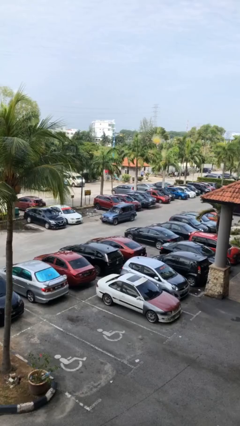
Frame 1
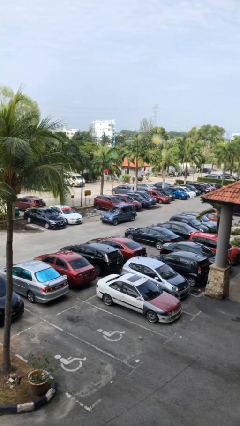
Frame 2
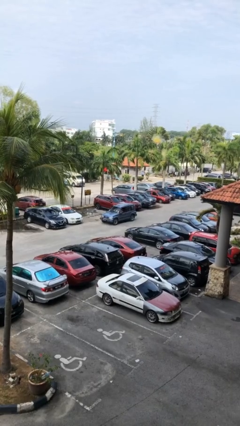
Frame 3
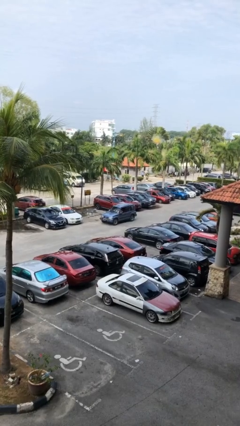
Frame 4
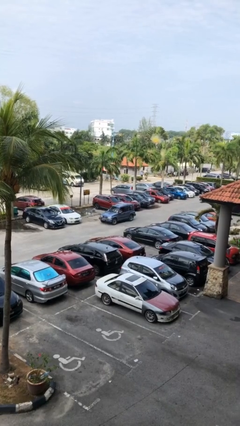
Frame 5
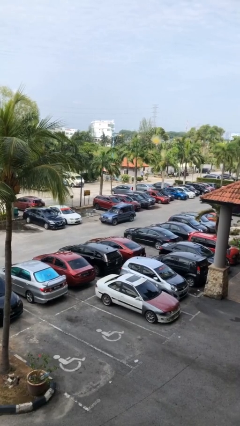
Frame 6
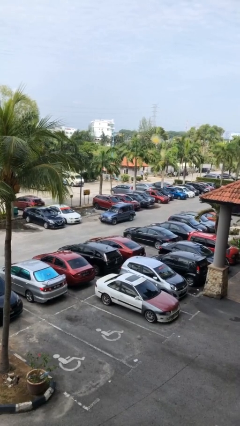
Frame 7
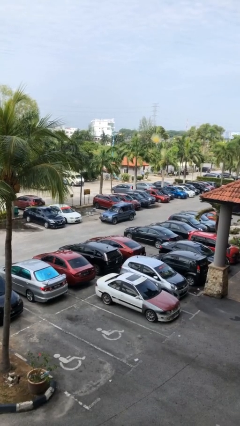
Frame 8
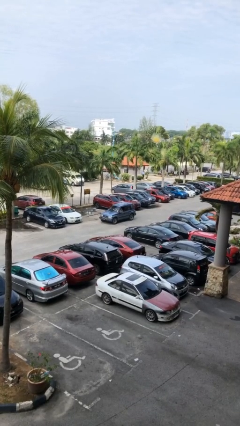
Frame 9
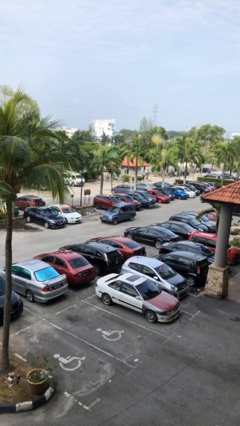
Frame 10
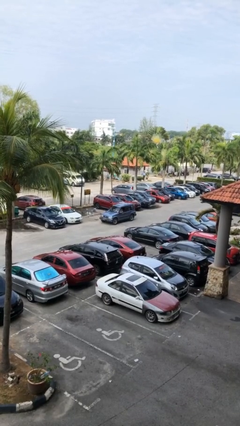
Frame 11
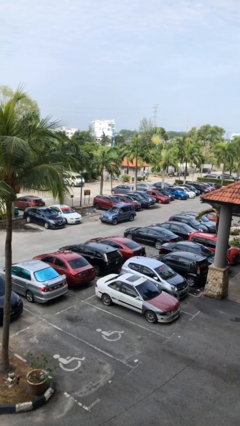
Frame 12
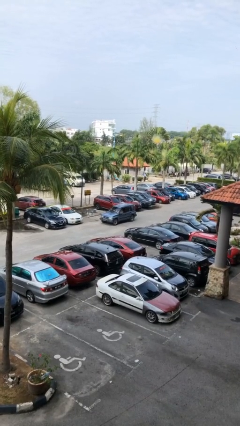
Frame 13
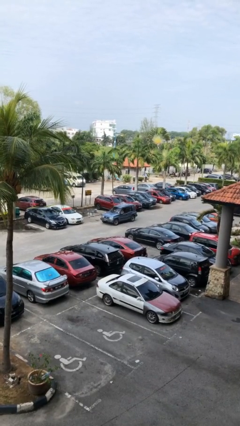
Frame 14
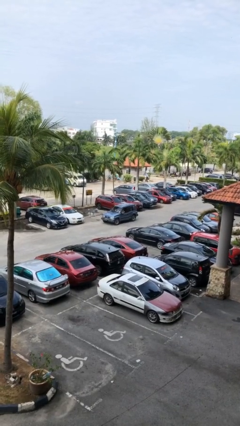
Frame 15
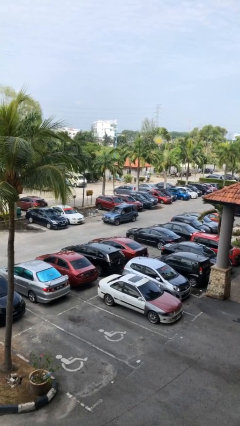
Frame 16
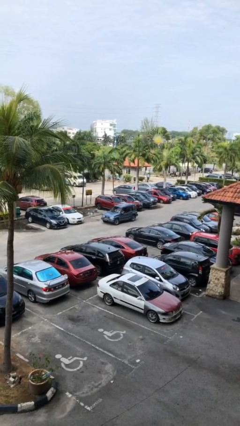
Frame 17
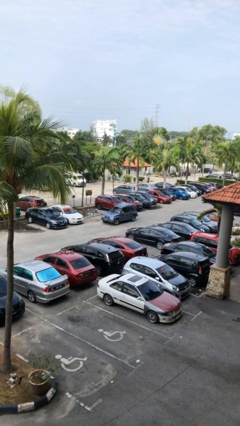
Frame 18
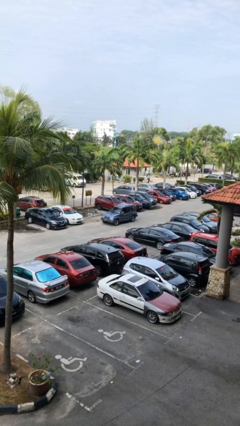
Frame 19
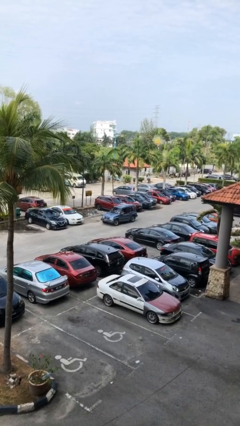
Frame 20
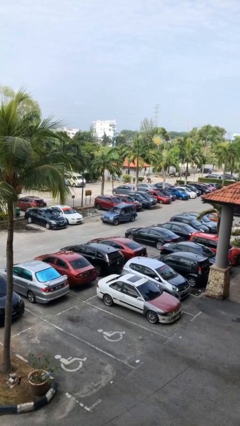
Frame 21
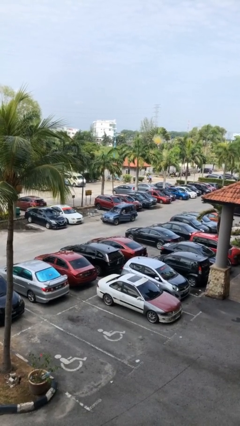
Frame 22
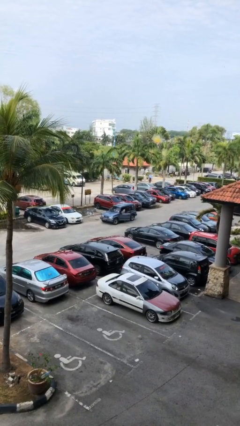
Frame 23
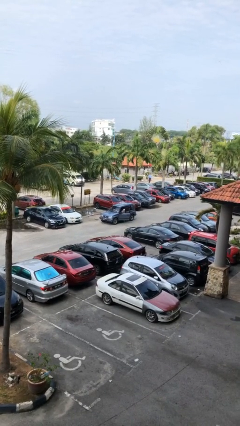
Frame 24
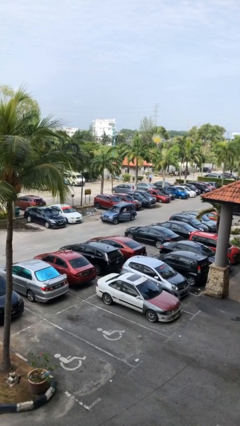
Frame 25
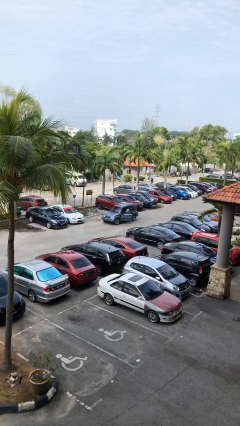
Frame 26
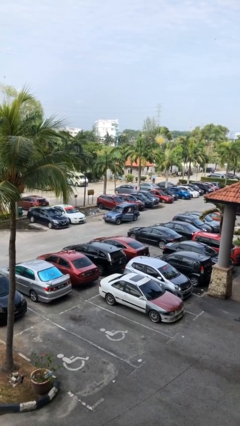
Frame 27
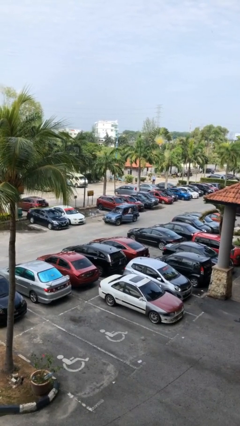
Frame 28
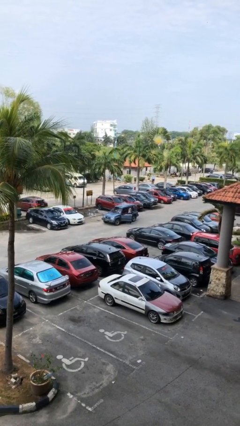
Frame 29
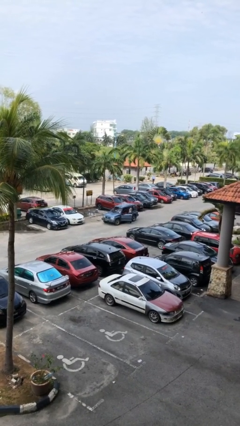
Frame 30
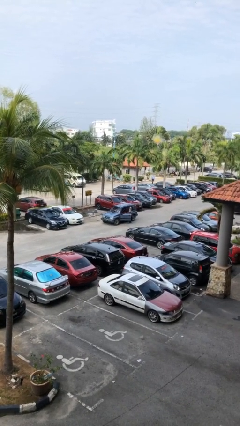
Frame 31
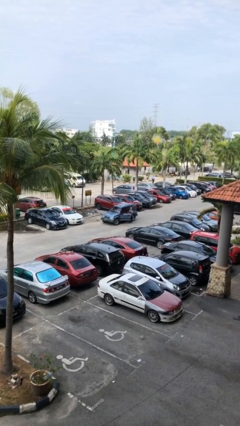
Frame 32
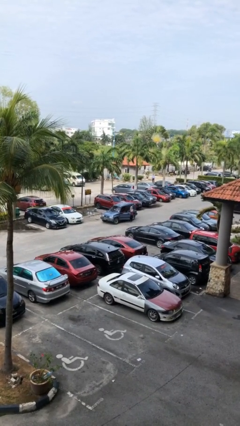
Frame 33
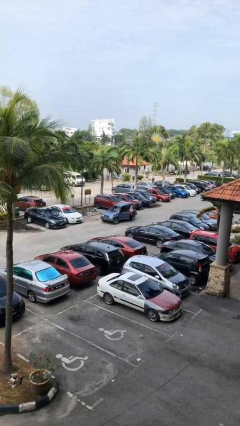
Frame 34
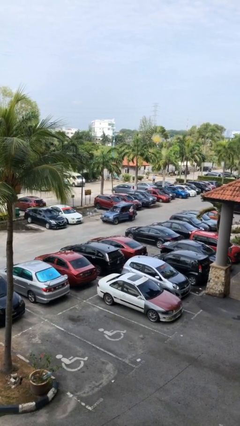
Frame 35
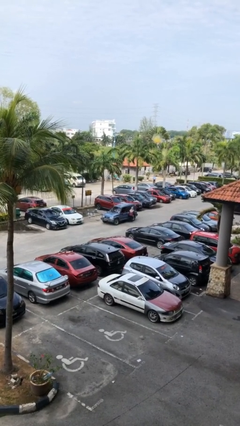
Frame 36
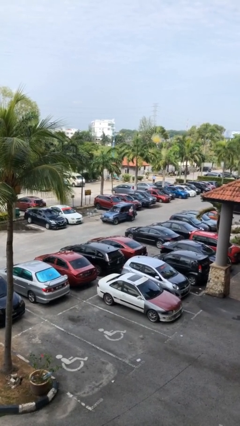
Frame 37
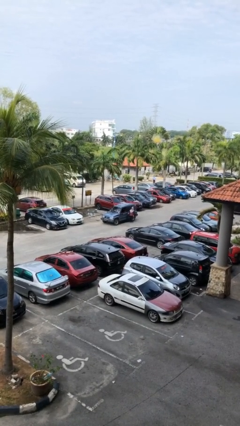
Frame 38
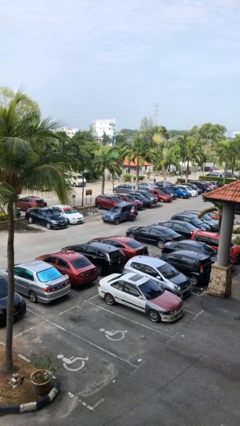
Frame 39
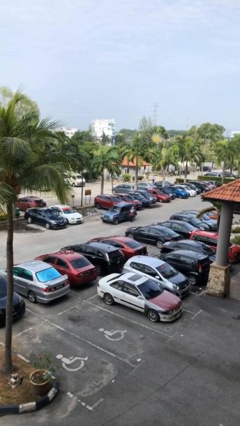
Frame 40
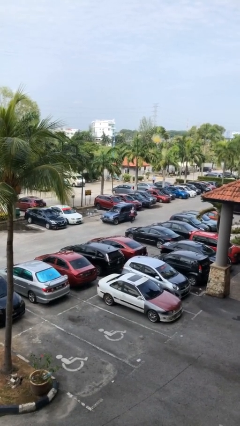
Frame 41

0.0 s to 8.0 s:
car drops off person

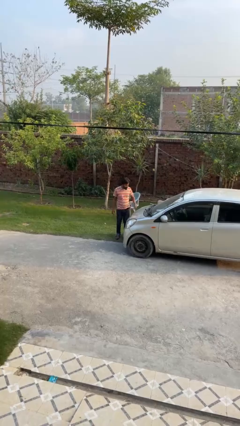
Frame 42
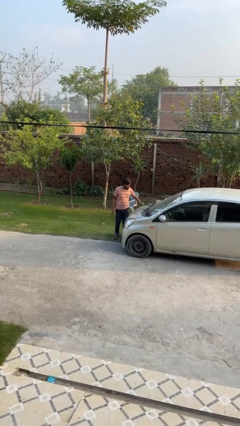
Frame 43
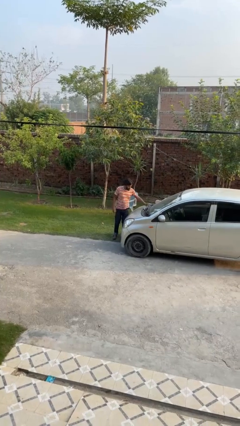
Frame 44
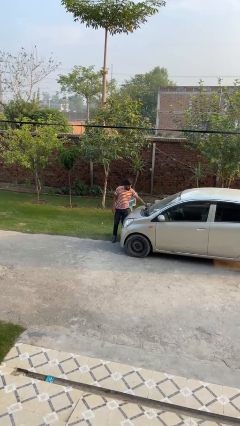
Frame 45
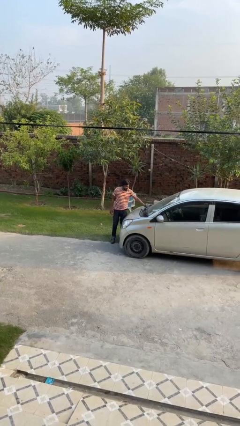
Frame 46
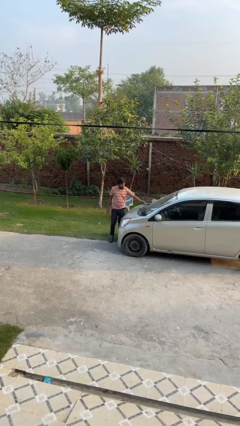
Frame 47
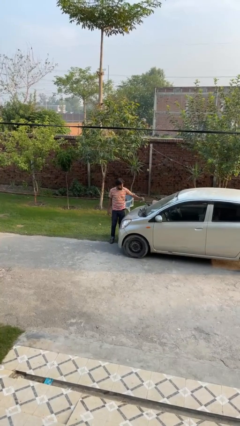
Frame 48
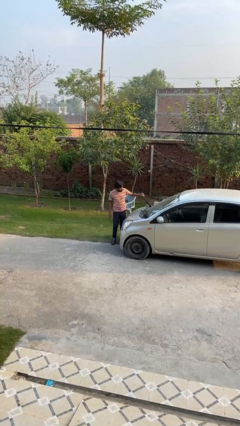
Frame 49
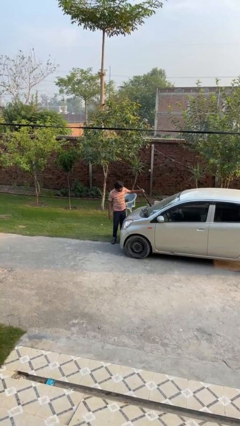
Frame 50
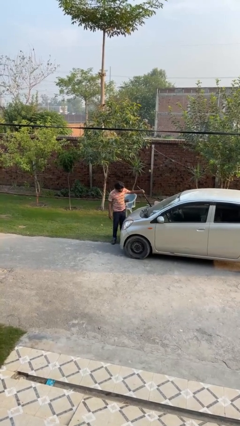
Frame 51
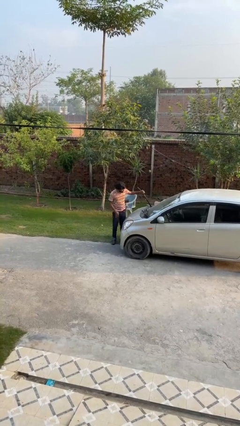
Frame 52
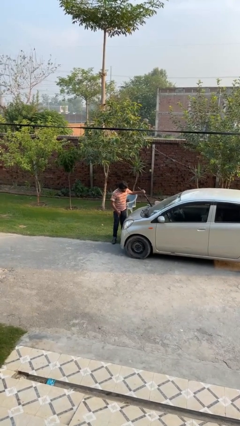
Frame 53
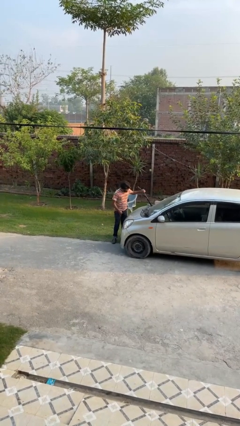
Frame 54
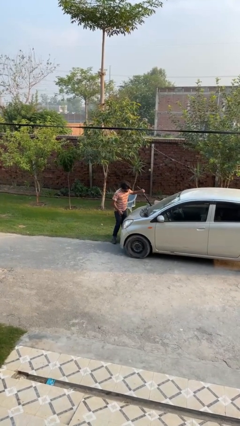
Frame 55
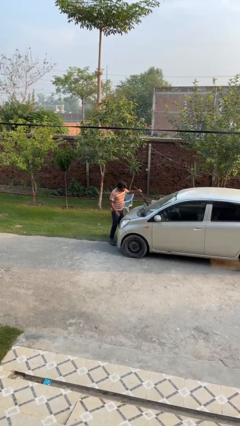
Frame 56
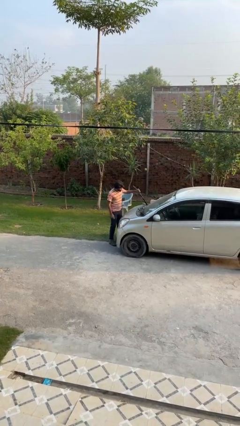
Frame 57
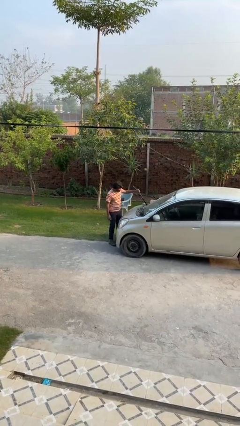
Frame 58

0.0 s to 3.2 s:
person flips up car wipers

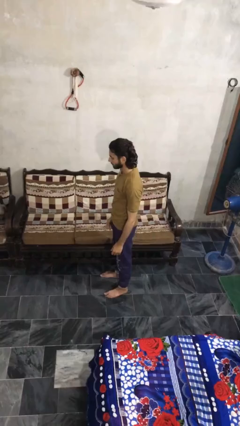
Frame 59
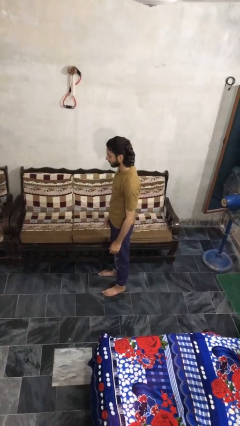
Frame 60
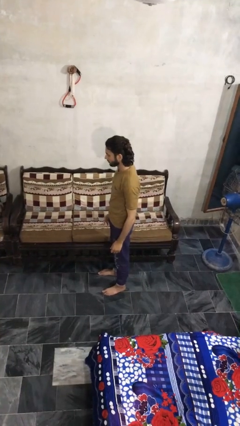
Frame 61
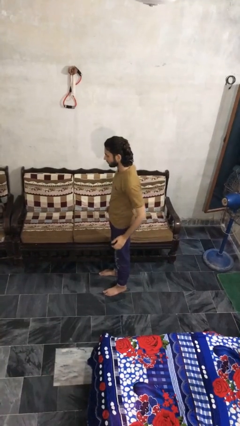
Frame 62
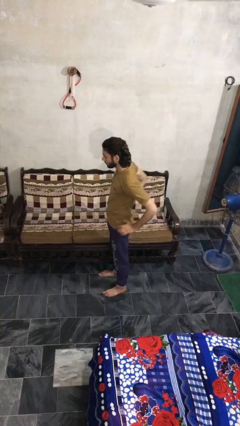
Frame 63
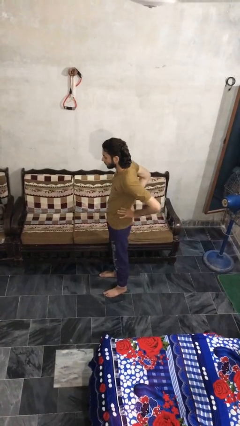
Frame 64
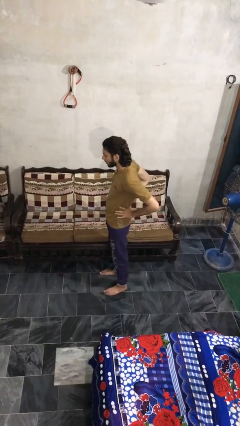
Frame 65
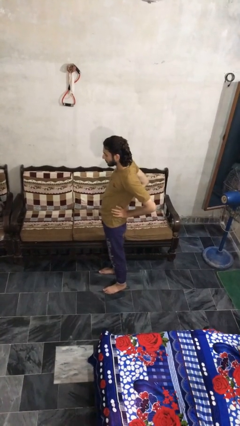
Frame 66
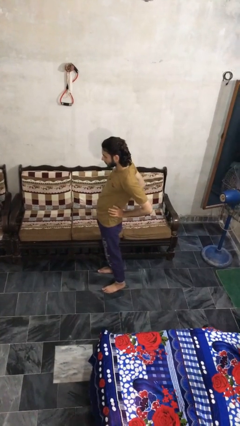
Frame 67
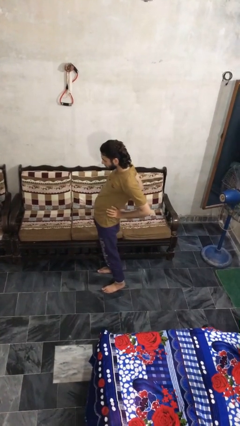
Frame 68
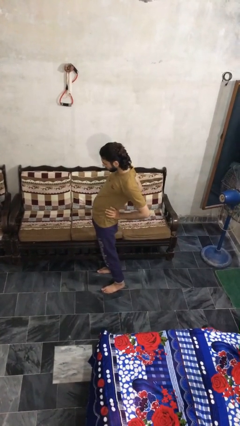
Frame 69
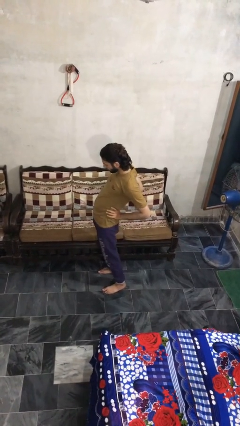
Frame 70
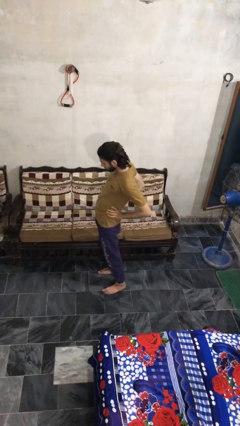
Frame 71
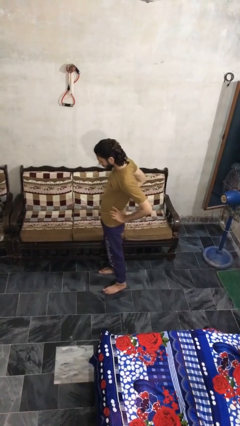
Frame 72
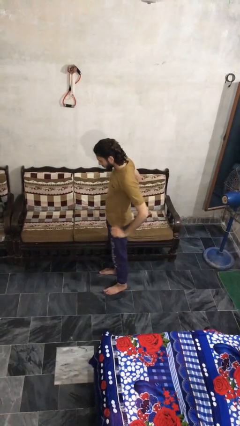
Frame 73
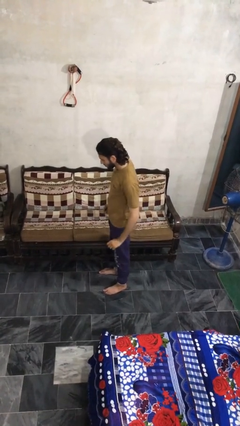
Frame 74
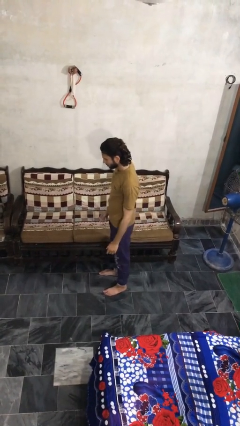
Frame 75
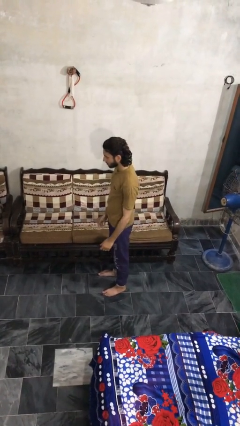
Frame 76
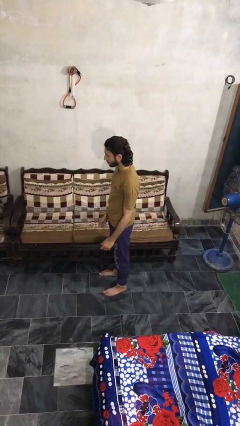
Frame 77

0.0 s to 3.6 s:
person stretches back

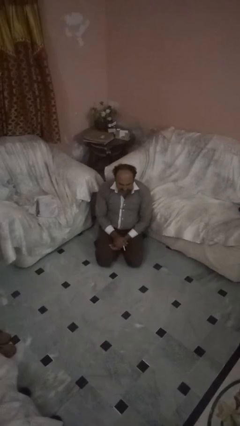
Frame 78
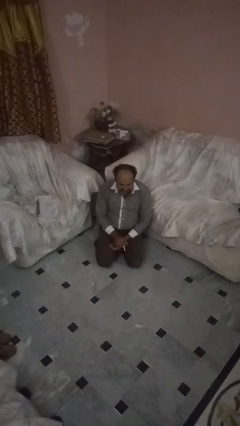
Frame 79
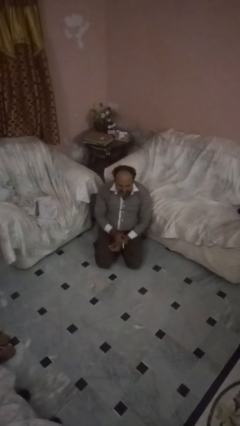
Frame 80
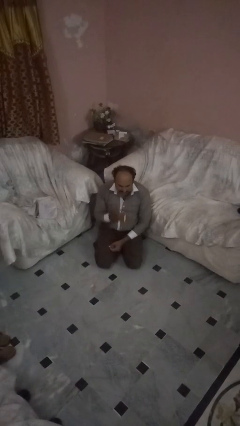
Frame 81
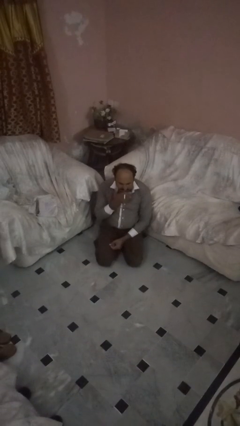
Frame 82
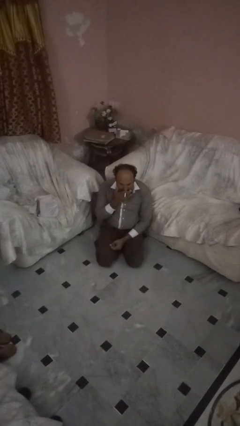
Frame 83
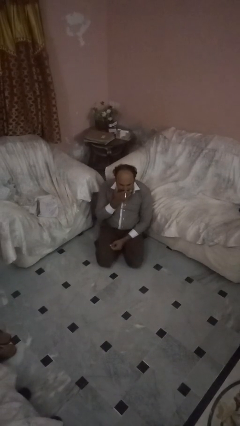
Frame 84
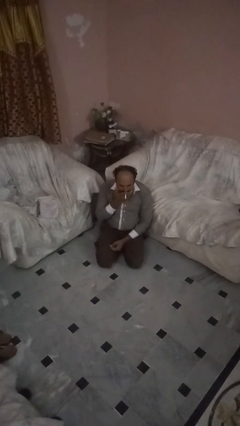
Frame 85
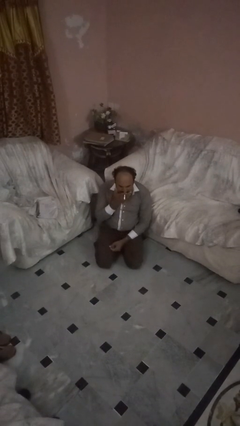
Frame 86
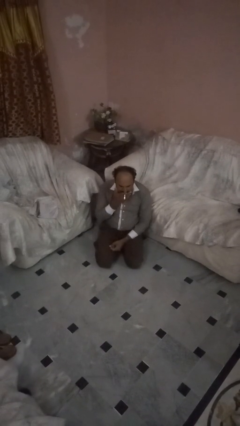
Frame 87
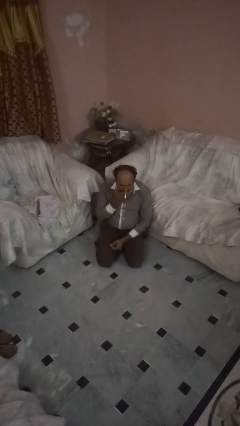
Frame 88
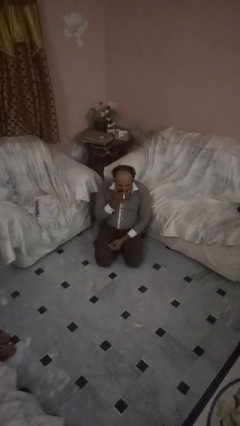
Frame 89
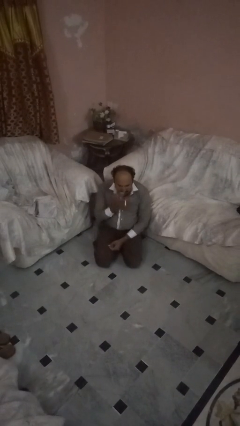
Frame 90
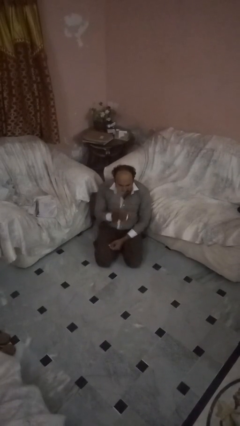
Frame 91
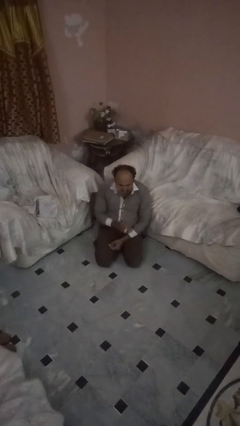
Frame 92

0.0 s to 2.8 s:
person vapes

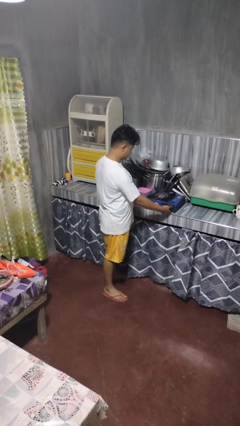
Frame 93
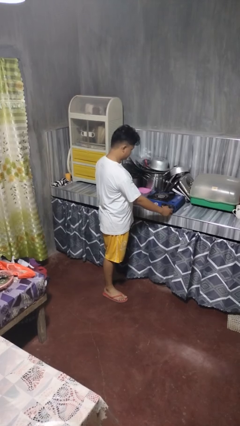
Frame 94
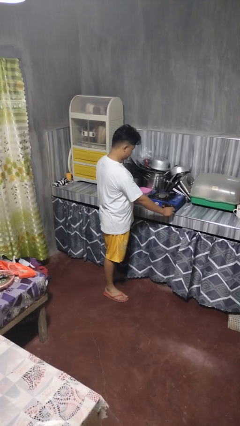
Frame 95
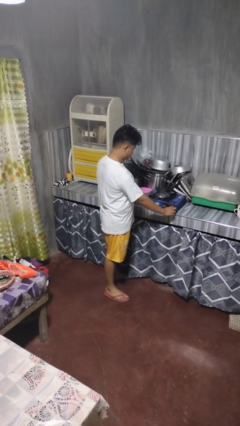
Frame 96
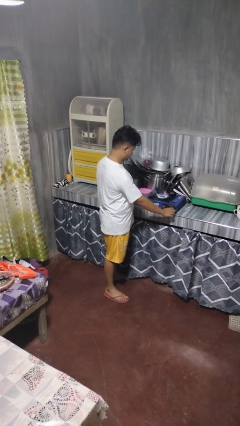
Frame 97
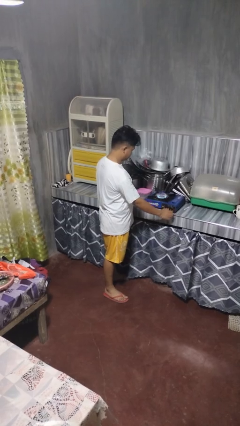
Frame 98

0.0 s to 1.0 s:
person turns on stovetop
